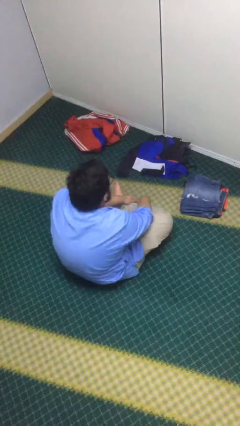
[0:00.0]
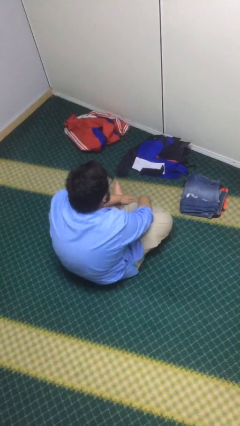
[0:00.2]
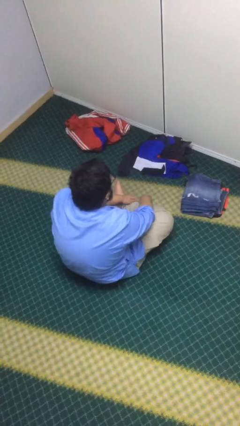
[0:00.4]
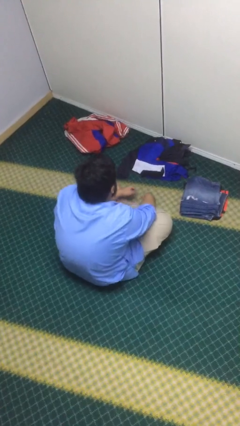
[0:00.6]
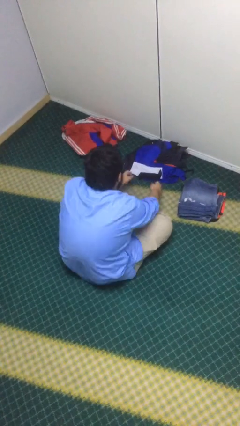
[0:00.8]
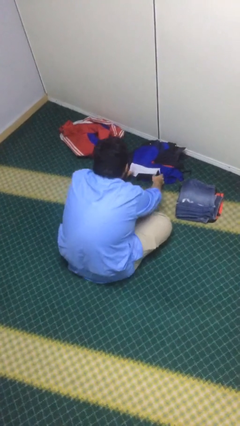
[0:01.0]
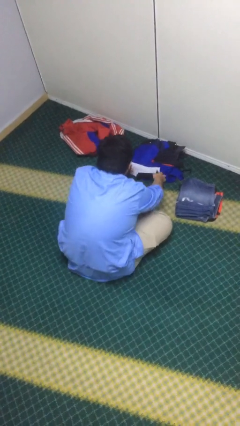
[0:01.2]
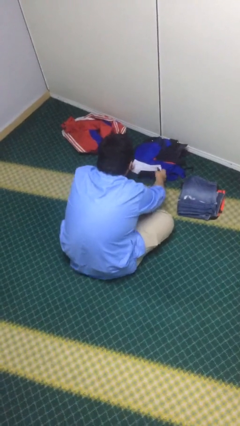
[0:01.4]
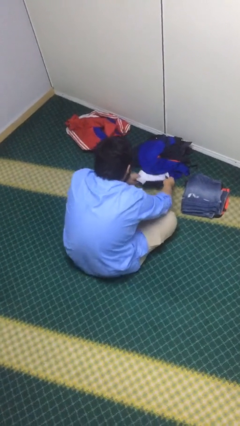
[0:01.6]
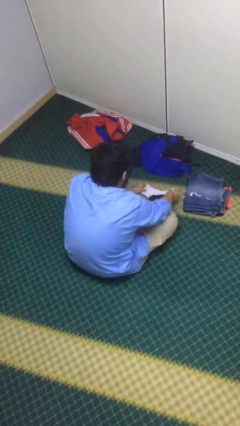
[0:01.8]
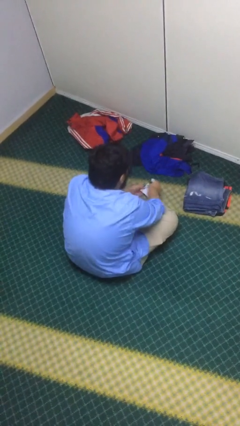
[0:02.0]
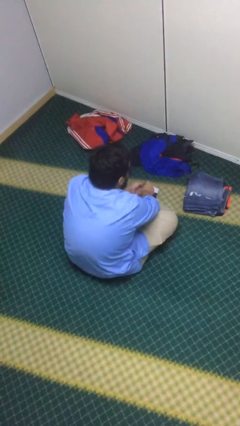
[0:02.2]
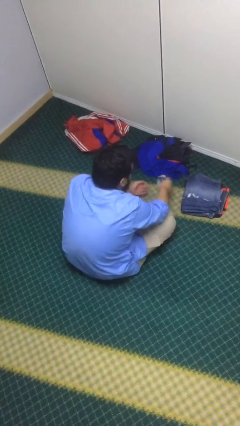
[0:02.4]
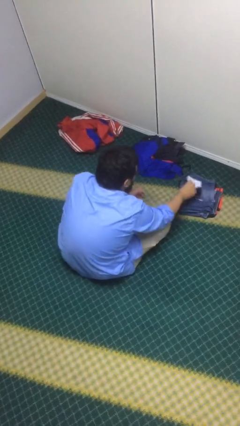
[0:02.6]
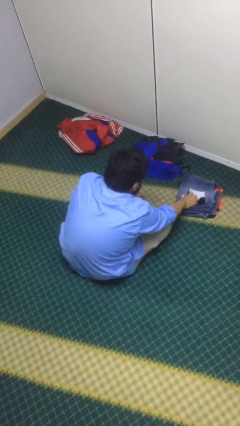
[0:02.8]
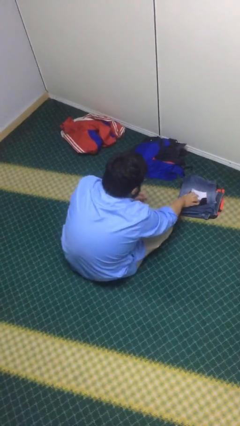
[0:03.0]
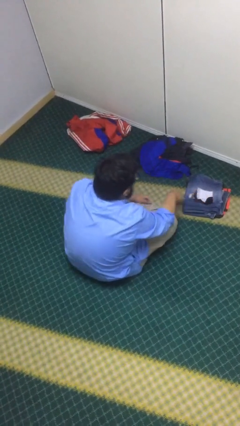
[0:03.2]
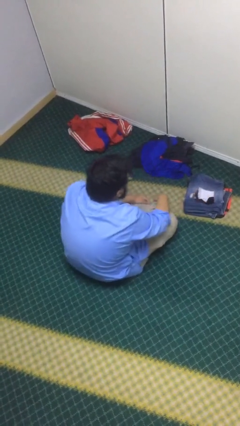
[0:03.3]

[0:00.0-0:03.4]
person folds socks

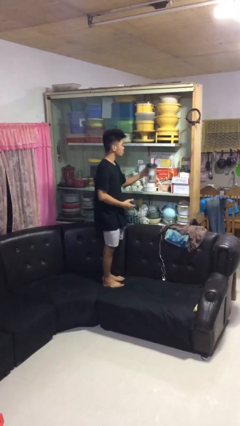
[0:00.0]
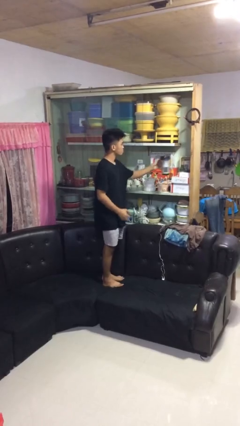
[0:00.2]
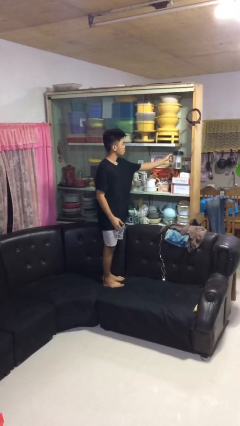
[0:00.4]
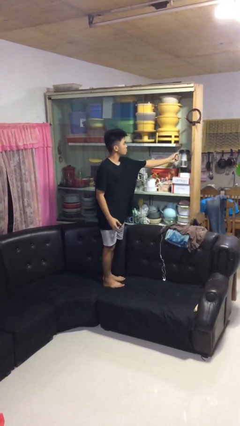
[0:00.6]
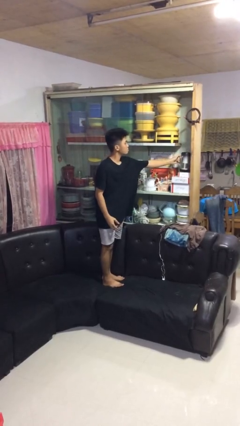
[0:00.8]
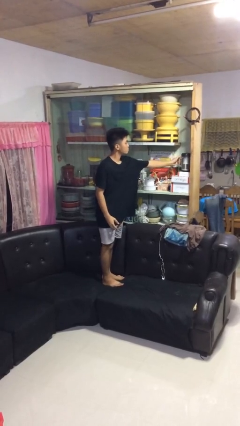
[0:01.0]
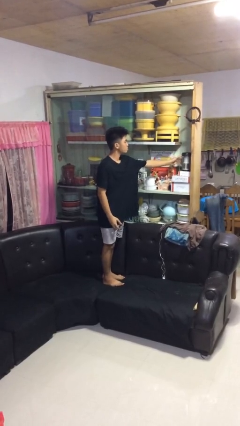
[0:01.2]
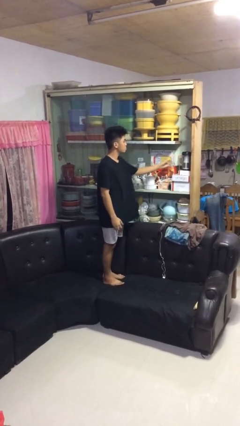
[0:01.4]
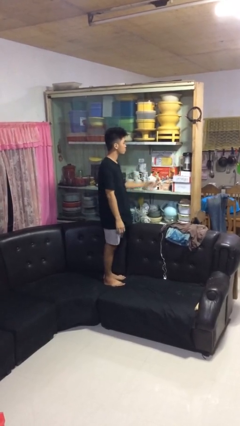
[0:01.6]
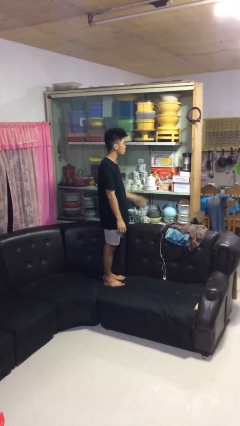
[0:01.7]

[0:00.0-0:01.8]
person puts down object into cabinet

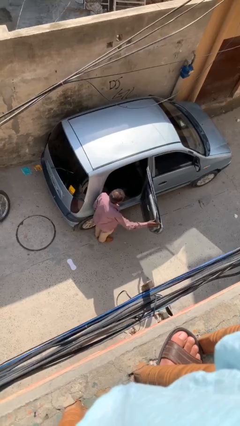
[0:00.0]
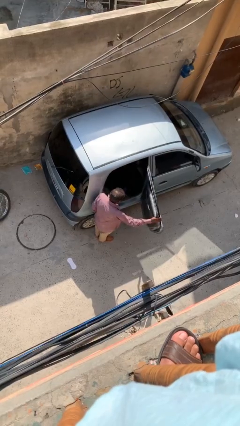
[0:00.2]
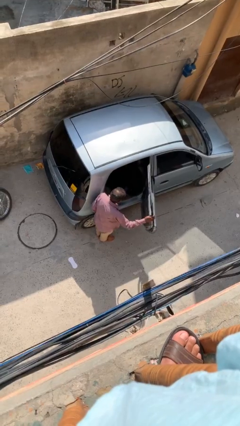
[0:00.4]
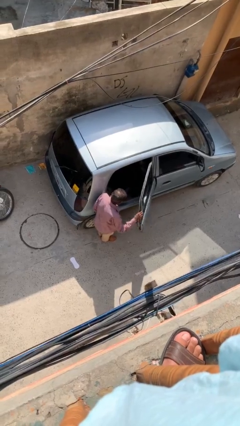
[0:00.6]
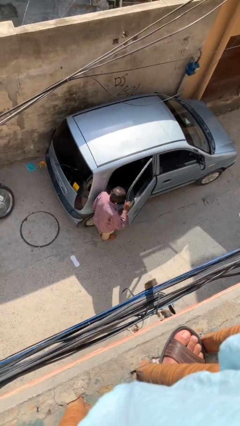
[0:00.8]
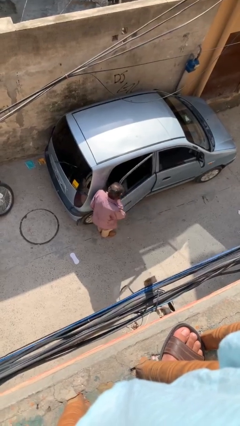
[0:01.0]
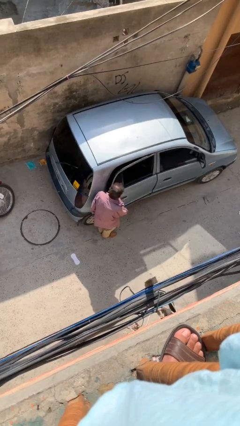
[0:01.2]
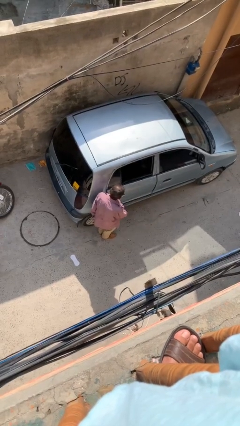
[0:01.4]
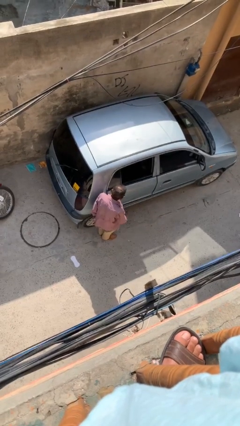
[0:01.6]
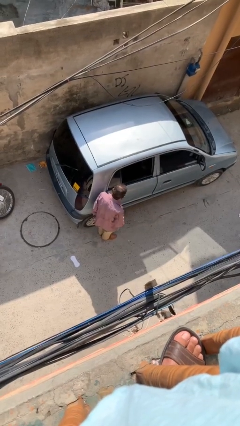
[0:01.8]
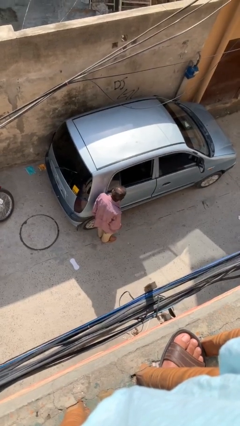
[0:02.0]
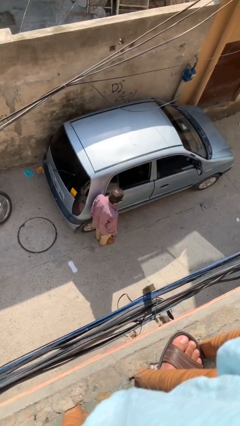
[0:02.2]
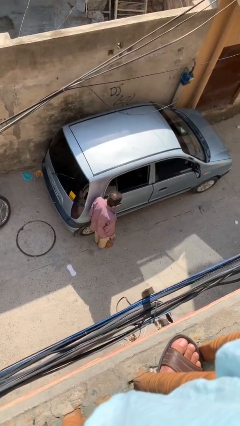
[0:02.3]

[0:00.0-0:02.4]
person closes car door

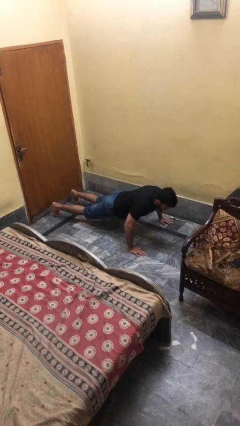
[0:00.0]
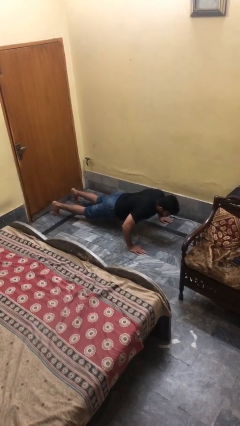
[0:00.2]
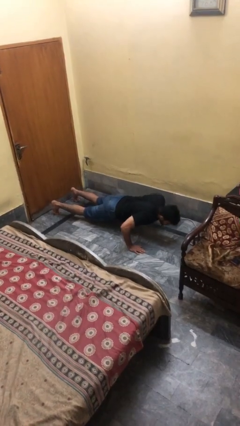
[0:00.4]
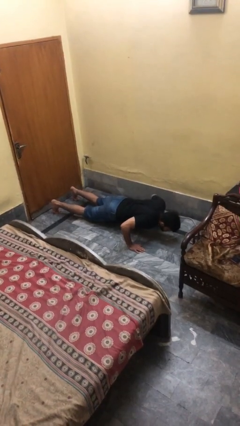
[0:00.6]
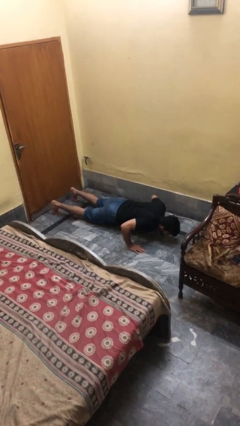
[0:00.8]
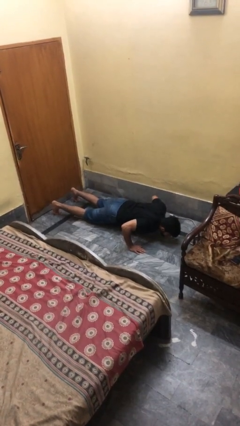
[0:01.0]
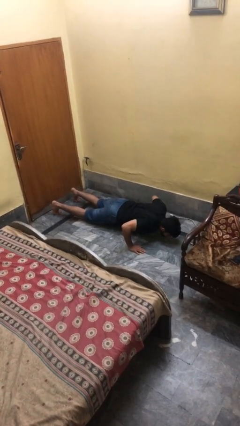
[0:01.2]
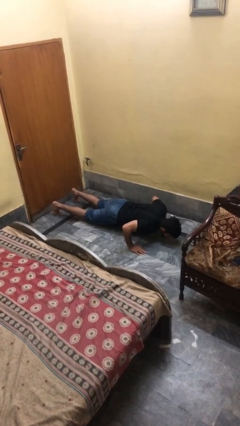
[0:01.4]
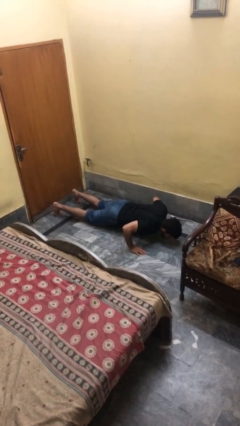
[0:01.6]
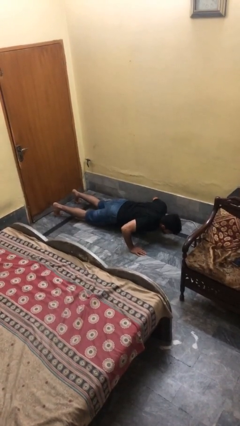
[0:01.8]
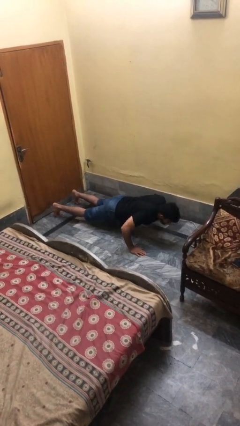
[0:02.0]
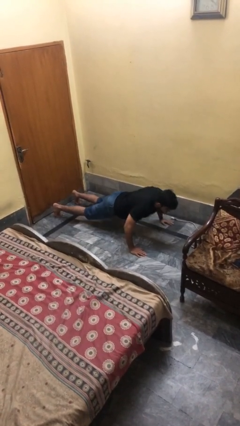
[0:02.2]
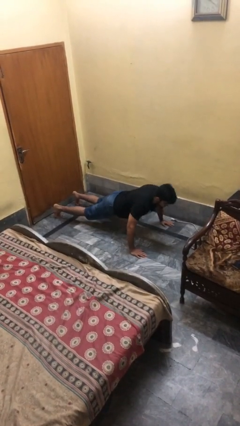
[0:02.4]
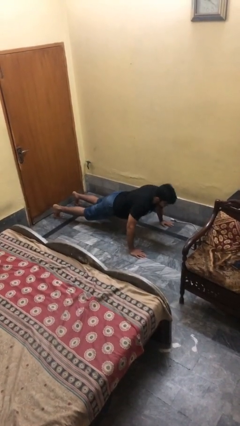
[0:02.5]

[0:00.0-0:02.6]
person exercises with pushup

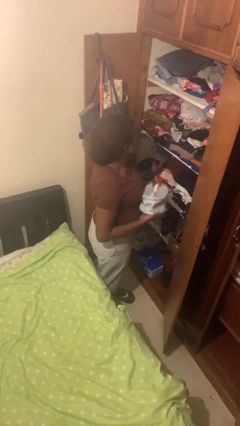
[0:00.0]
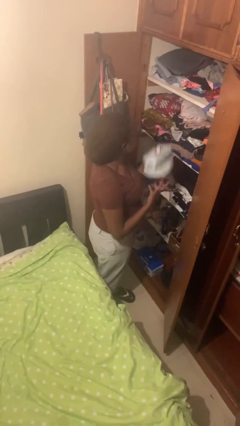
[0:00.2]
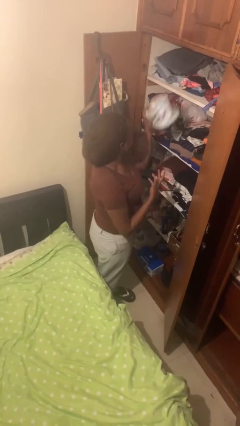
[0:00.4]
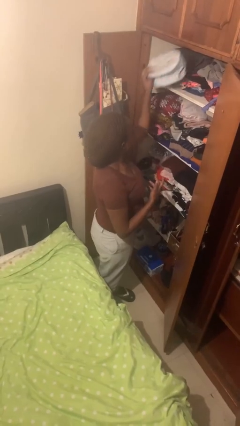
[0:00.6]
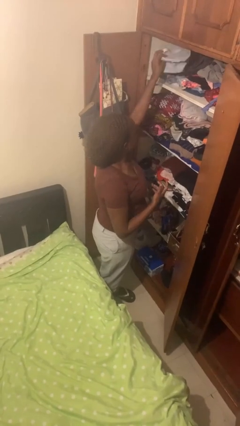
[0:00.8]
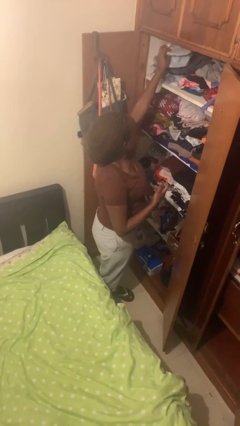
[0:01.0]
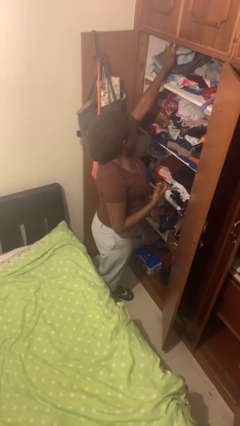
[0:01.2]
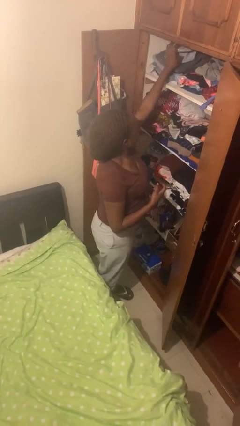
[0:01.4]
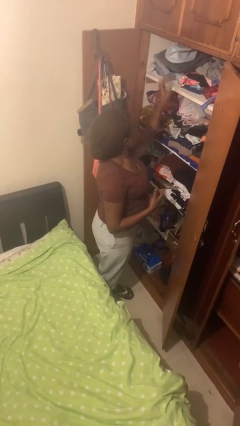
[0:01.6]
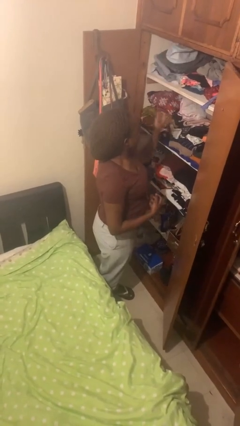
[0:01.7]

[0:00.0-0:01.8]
person puts down object on shelf

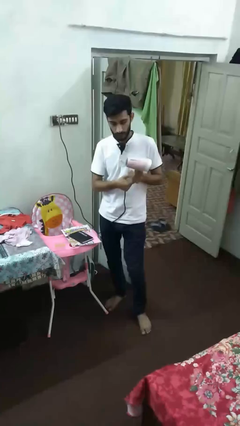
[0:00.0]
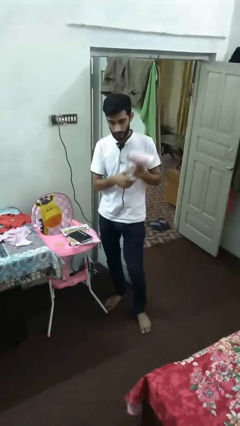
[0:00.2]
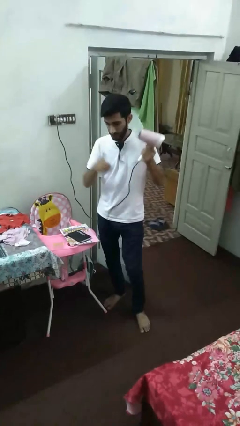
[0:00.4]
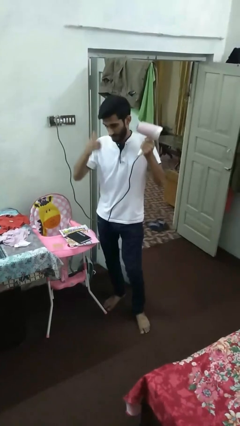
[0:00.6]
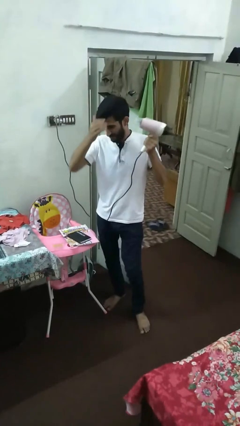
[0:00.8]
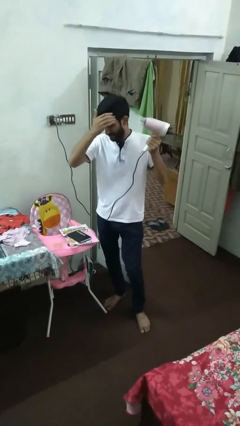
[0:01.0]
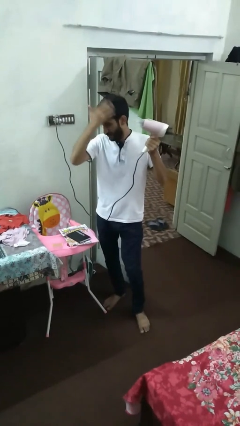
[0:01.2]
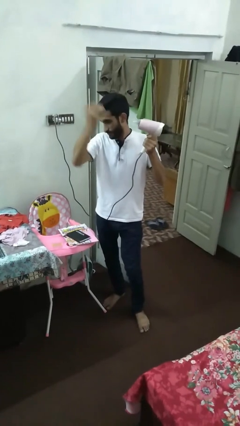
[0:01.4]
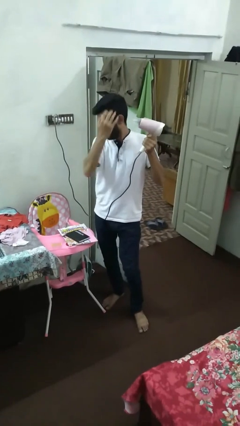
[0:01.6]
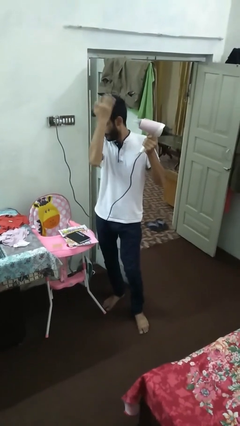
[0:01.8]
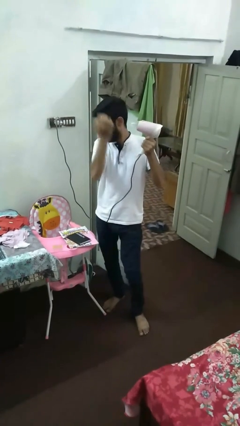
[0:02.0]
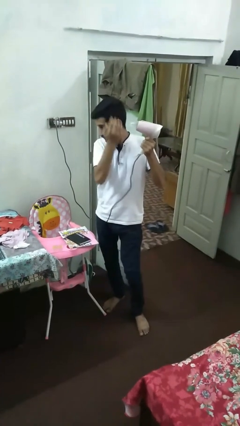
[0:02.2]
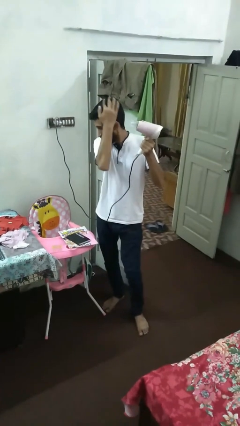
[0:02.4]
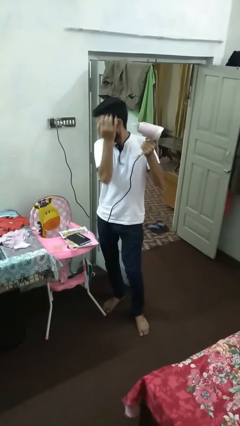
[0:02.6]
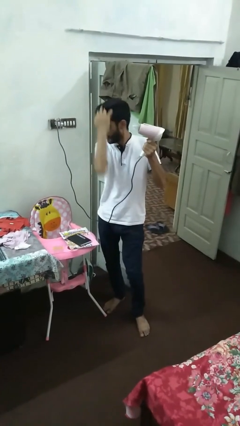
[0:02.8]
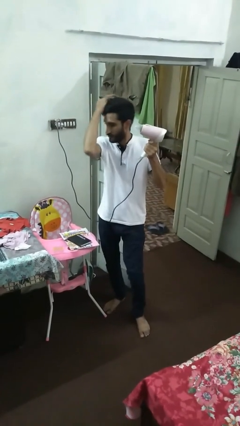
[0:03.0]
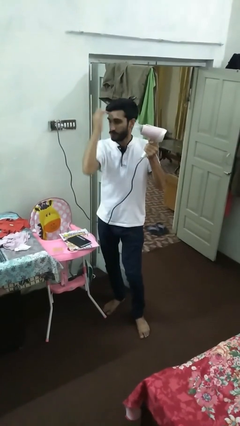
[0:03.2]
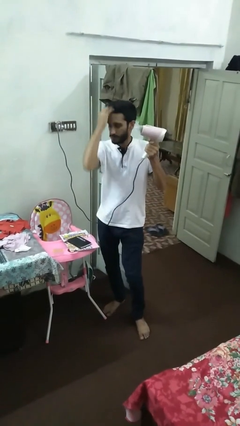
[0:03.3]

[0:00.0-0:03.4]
person dries hair with hairdryer

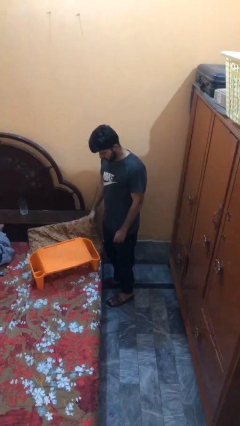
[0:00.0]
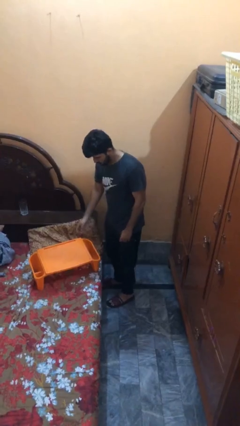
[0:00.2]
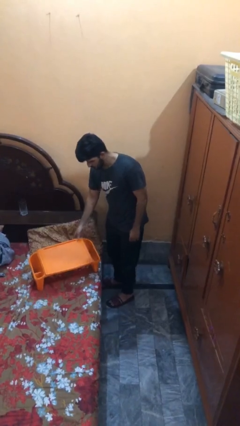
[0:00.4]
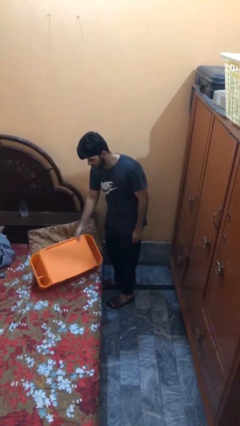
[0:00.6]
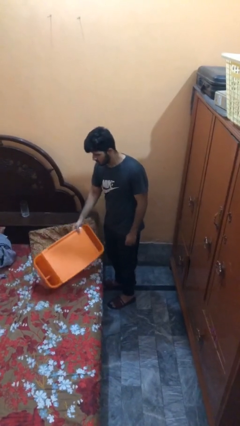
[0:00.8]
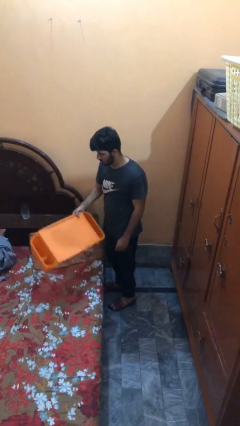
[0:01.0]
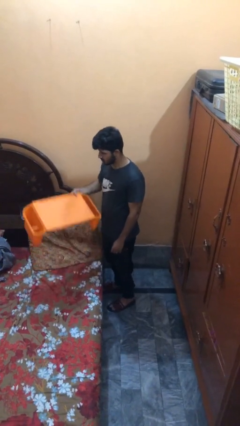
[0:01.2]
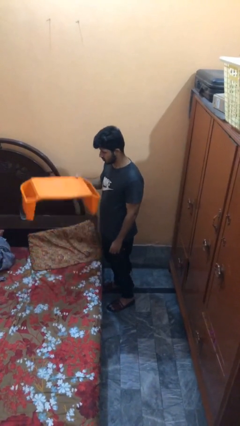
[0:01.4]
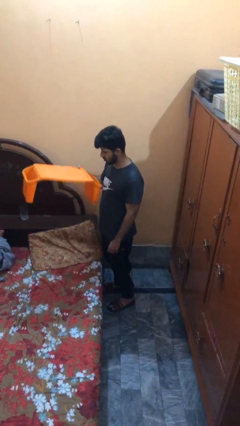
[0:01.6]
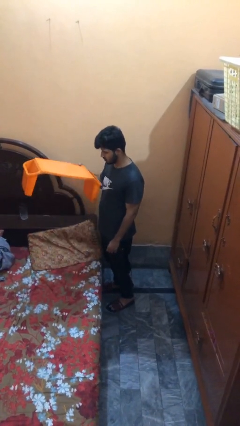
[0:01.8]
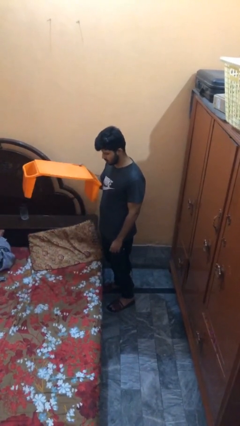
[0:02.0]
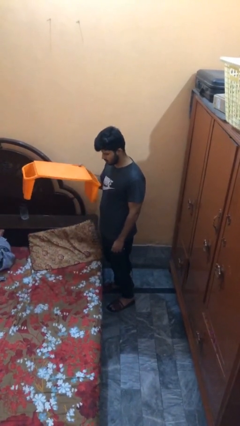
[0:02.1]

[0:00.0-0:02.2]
person picks up object from bed
